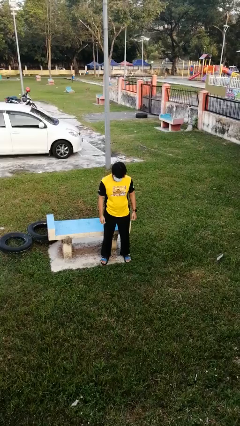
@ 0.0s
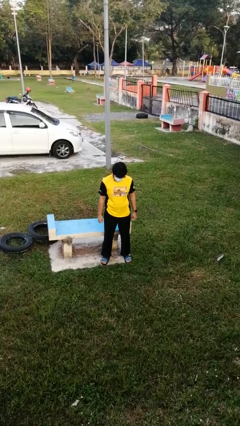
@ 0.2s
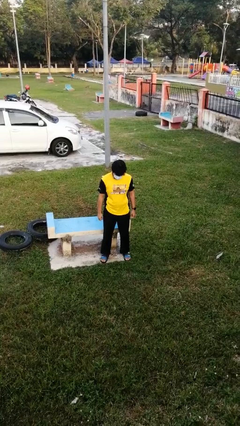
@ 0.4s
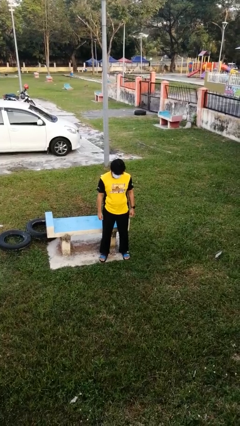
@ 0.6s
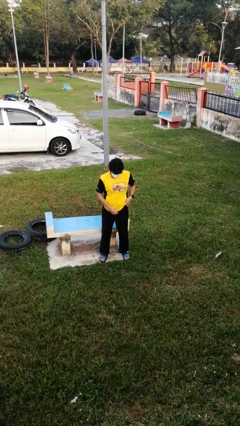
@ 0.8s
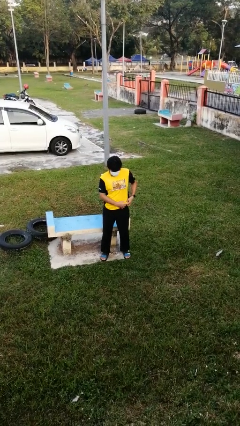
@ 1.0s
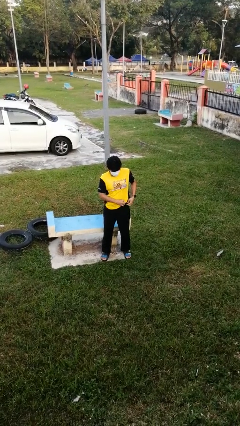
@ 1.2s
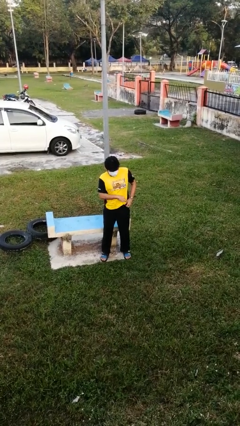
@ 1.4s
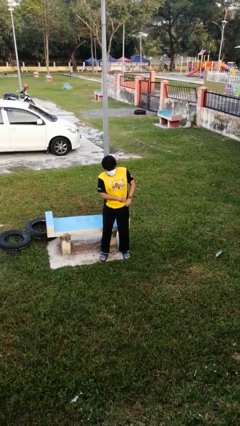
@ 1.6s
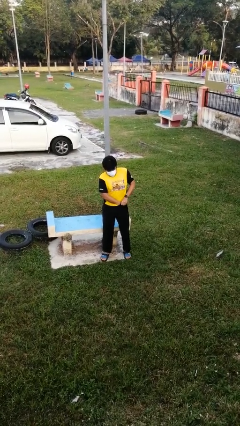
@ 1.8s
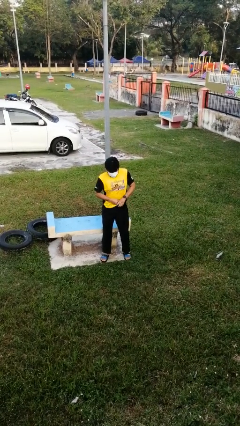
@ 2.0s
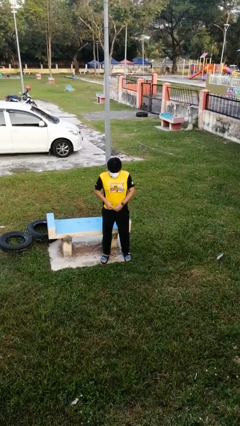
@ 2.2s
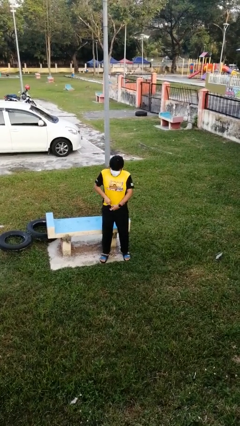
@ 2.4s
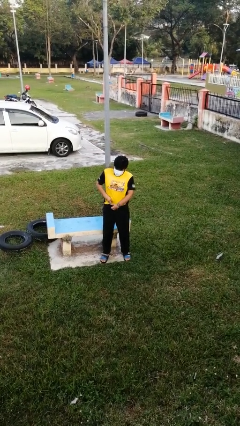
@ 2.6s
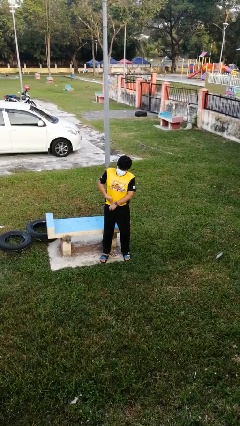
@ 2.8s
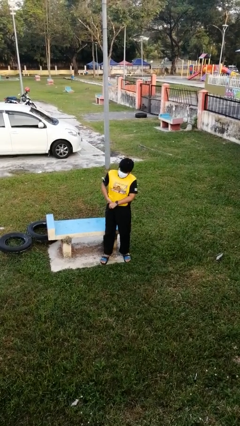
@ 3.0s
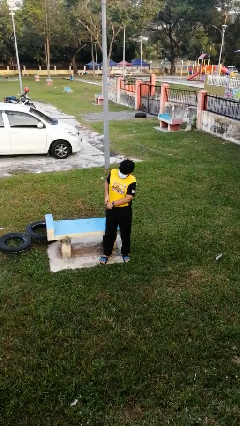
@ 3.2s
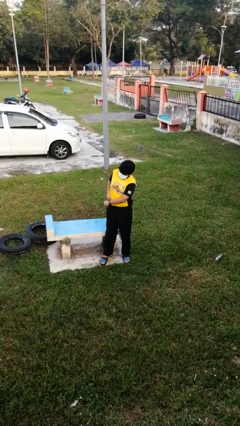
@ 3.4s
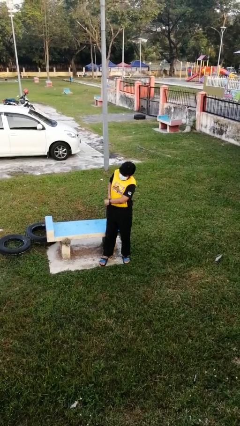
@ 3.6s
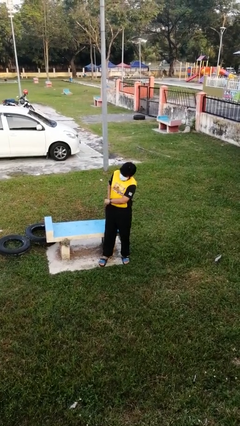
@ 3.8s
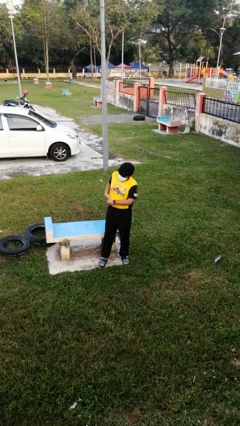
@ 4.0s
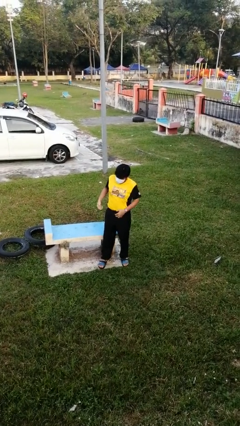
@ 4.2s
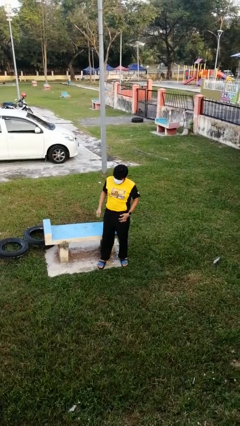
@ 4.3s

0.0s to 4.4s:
person tucks in shirt

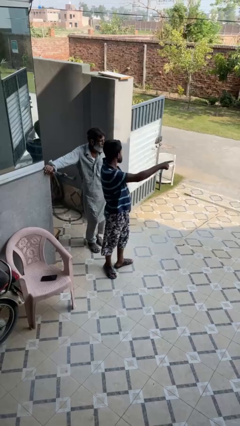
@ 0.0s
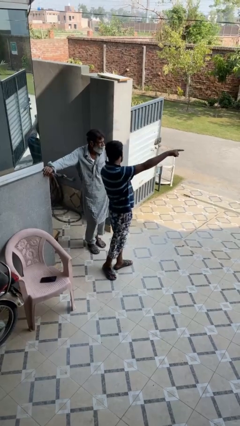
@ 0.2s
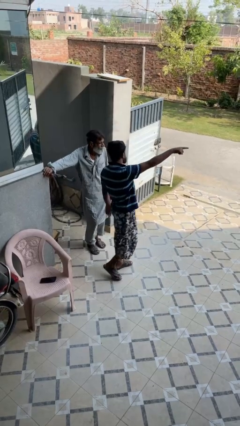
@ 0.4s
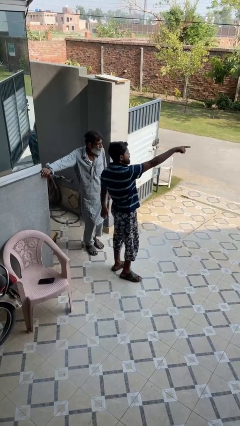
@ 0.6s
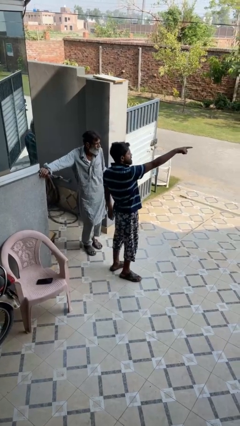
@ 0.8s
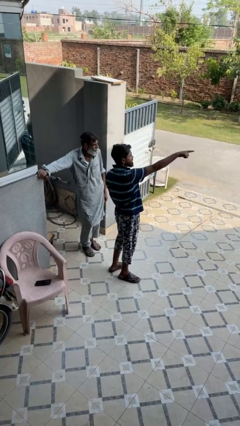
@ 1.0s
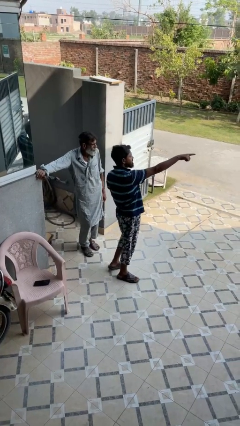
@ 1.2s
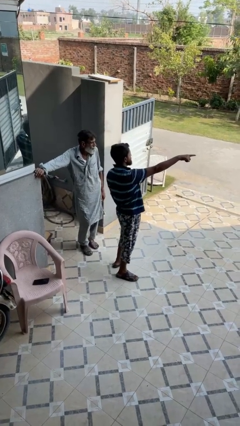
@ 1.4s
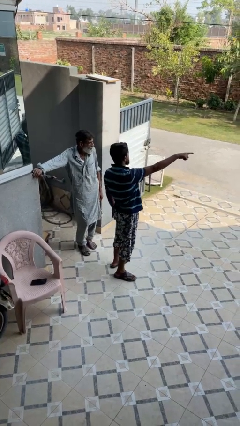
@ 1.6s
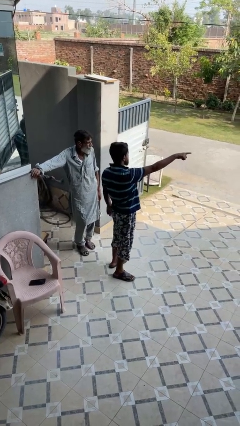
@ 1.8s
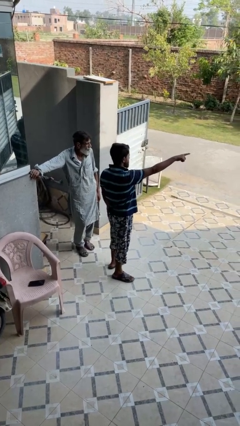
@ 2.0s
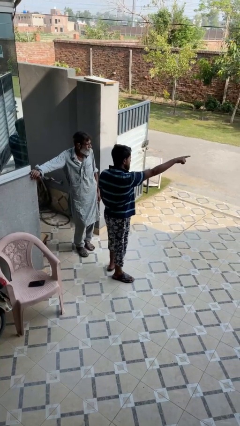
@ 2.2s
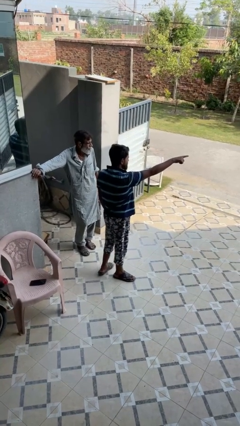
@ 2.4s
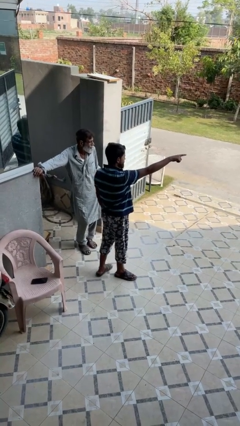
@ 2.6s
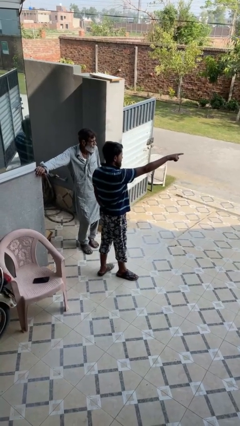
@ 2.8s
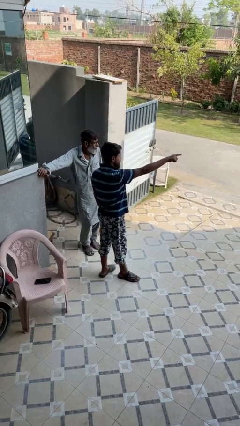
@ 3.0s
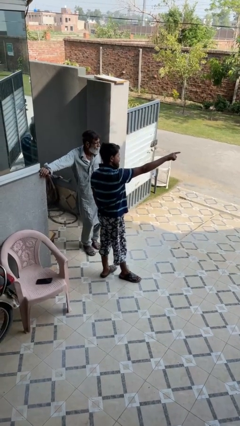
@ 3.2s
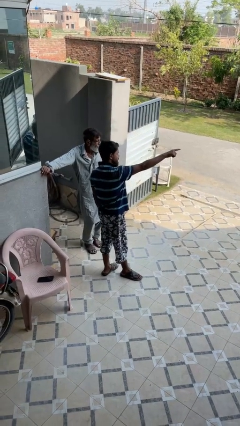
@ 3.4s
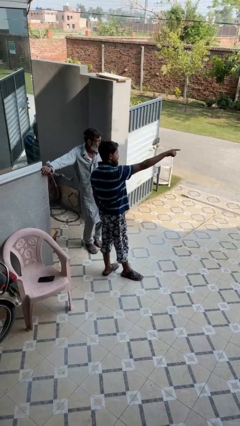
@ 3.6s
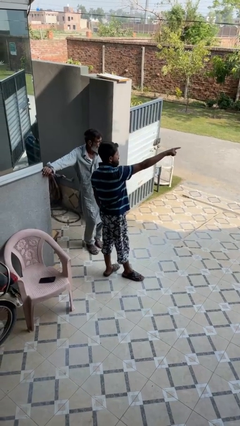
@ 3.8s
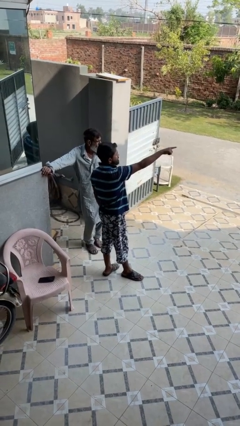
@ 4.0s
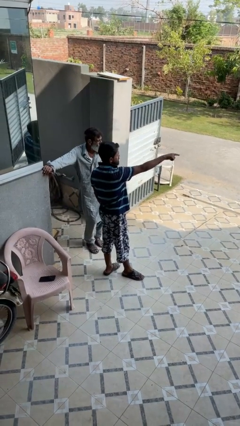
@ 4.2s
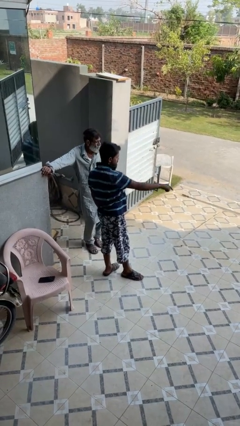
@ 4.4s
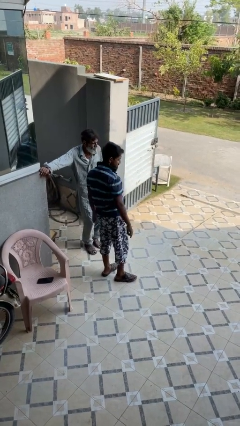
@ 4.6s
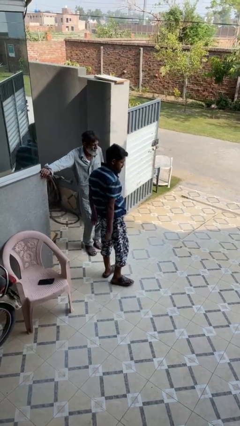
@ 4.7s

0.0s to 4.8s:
person points at person

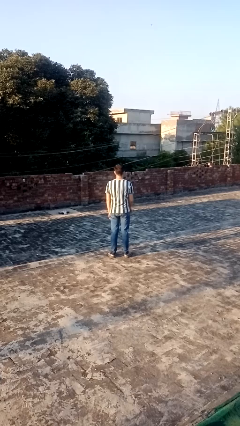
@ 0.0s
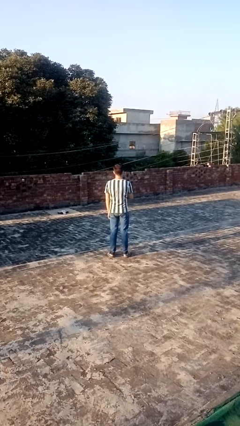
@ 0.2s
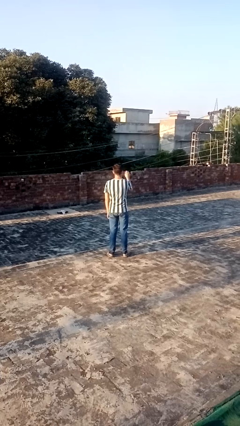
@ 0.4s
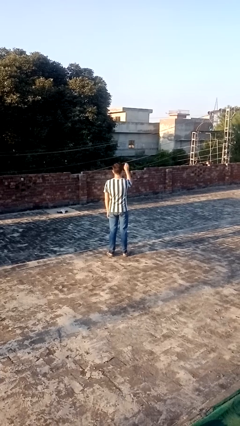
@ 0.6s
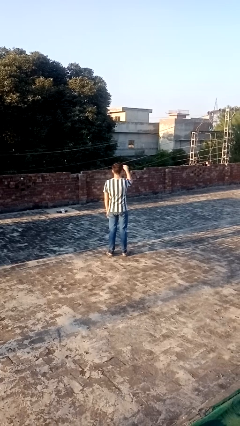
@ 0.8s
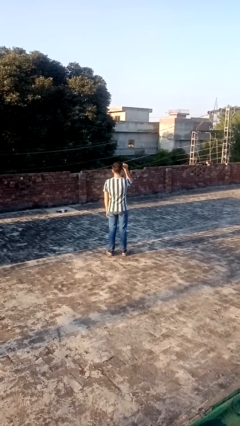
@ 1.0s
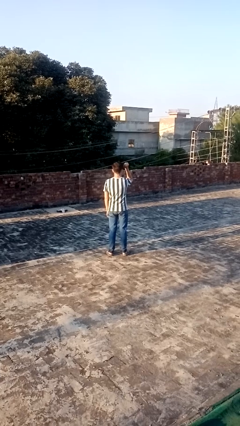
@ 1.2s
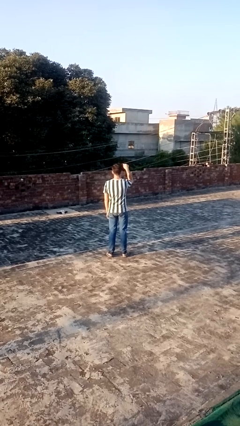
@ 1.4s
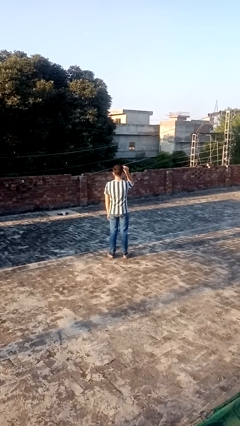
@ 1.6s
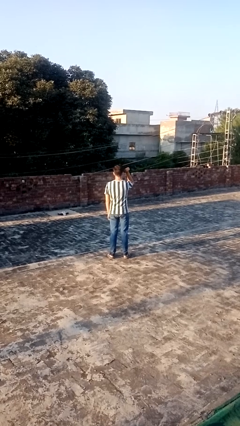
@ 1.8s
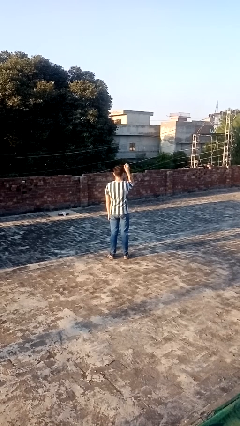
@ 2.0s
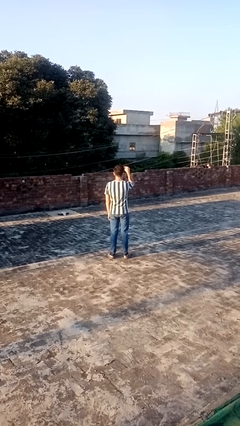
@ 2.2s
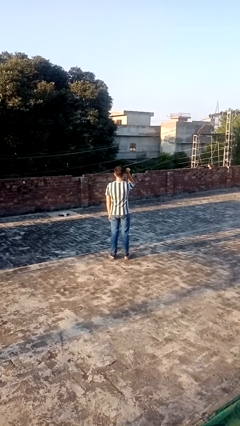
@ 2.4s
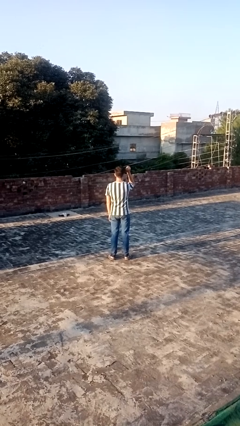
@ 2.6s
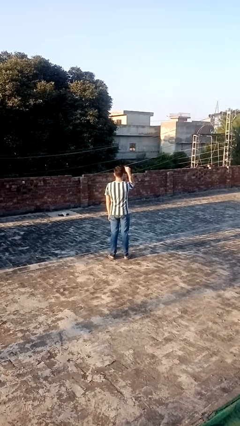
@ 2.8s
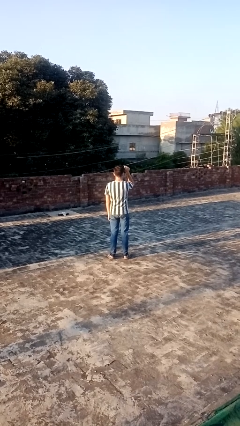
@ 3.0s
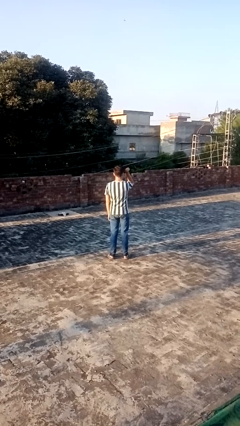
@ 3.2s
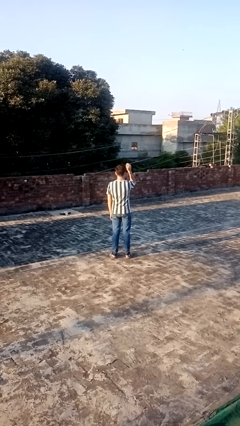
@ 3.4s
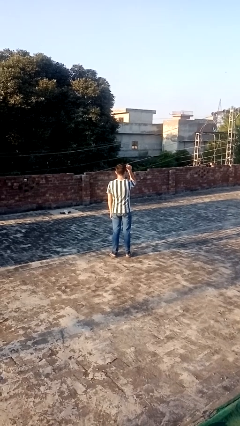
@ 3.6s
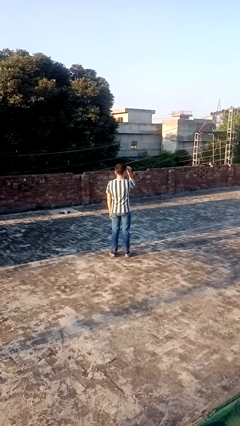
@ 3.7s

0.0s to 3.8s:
person gestures come here

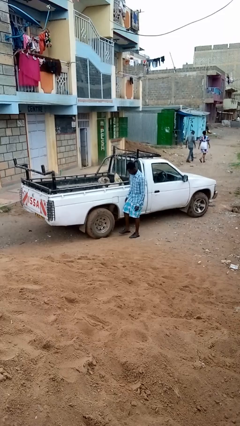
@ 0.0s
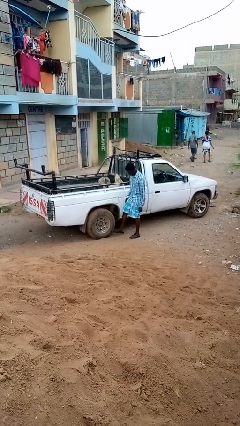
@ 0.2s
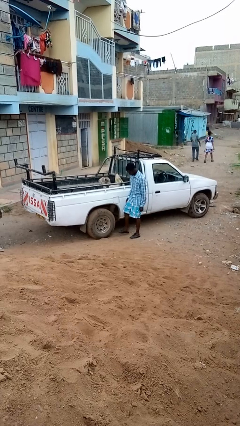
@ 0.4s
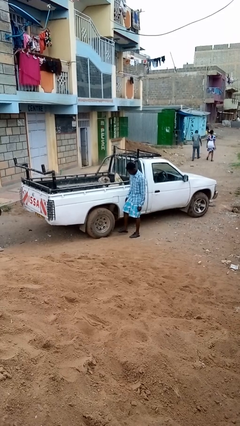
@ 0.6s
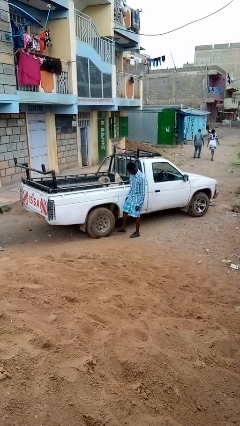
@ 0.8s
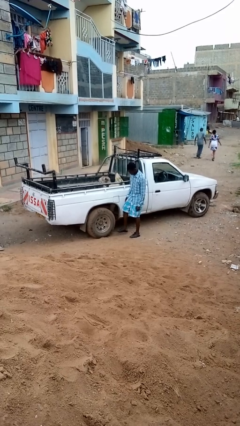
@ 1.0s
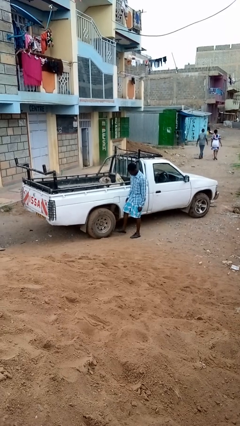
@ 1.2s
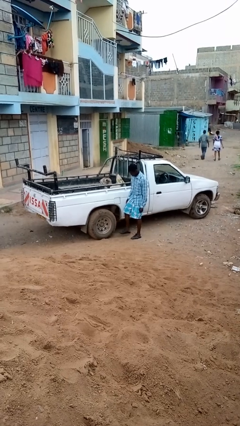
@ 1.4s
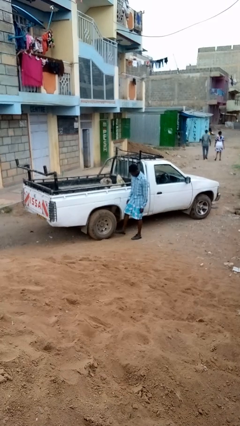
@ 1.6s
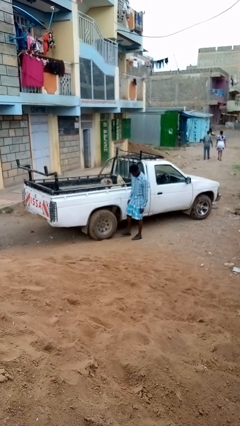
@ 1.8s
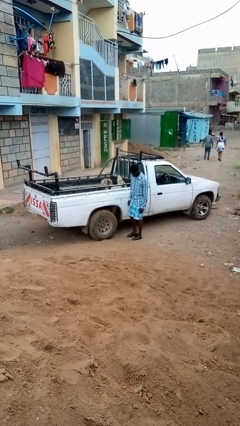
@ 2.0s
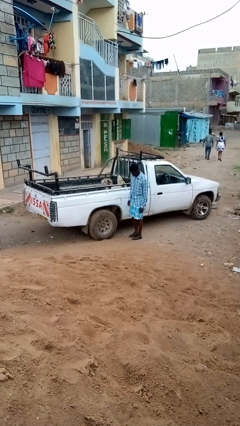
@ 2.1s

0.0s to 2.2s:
person kicks car tires

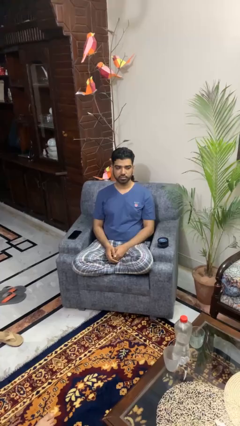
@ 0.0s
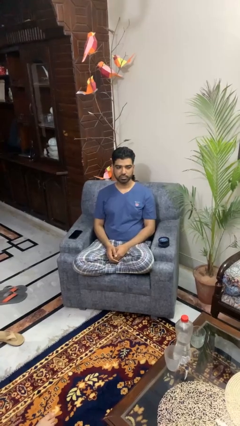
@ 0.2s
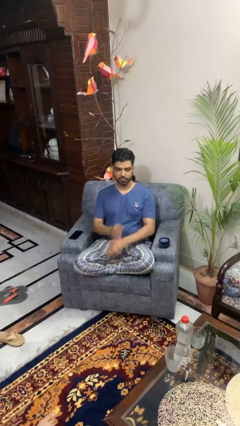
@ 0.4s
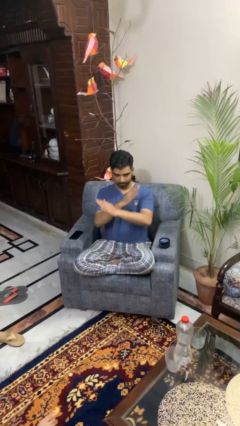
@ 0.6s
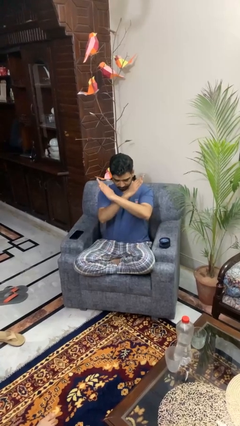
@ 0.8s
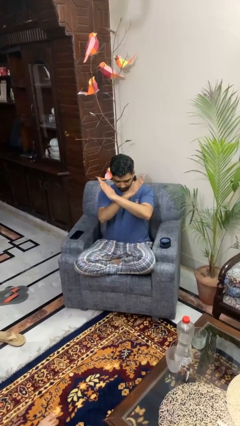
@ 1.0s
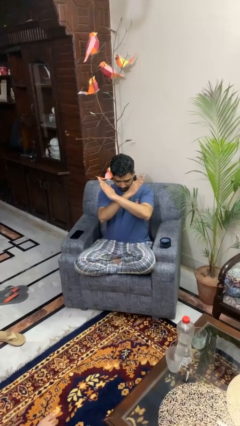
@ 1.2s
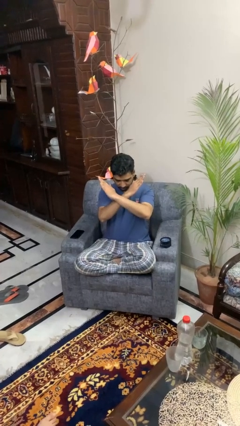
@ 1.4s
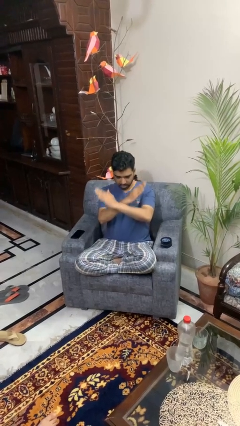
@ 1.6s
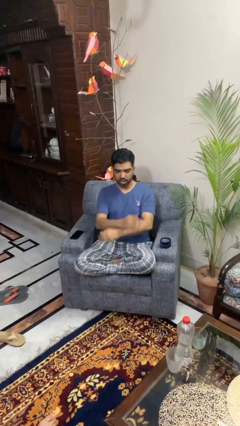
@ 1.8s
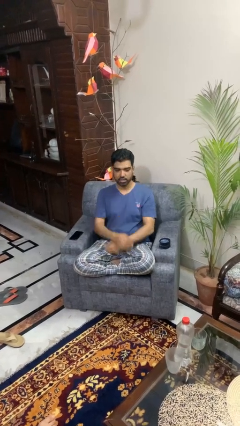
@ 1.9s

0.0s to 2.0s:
person gestures arms x

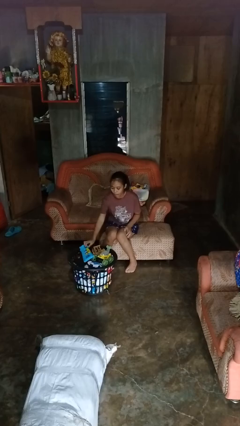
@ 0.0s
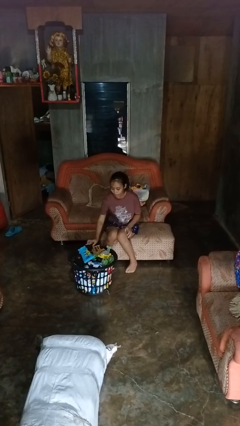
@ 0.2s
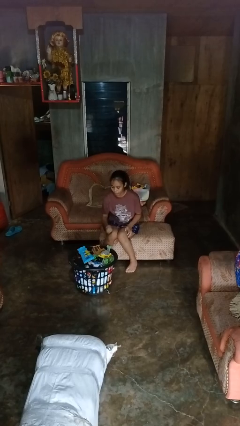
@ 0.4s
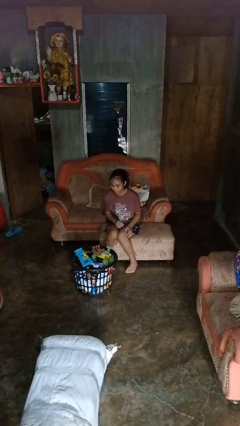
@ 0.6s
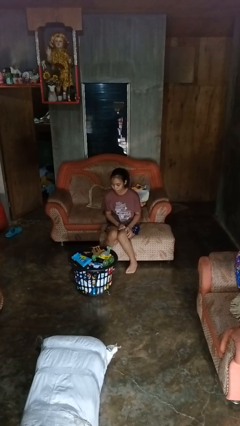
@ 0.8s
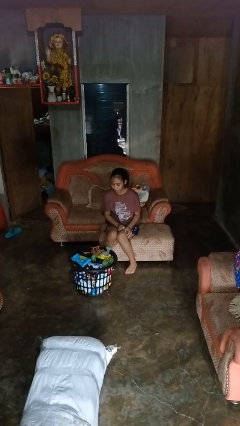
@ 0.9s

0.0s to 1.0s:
person puts object into basket
